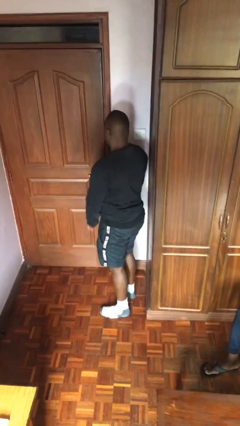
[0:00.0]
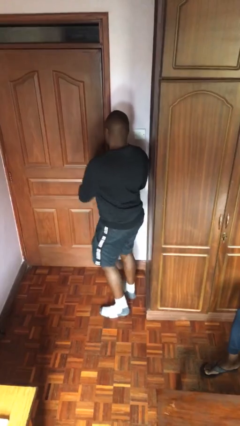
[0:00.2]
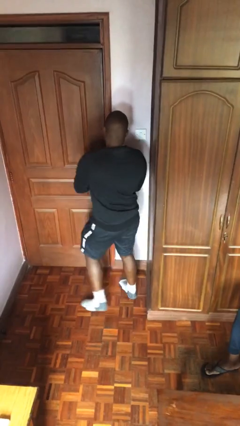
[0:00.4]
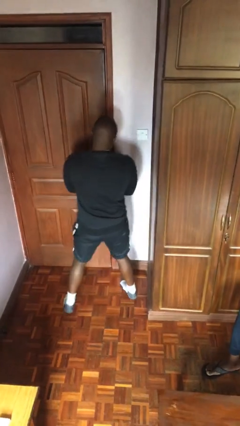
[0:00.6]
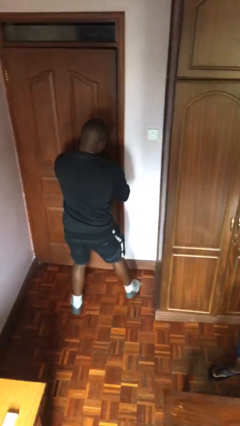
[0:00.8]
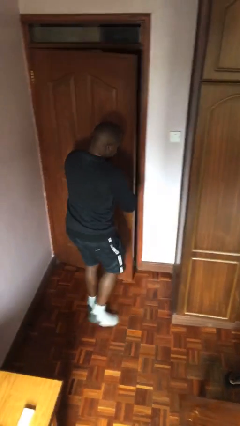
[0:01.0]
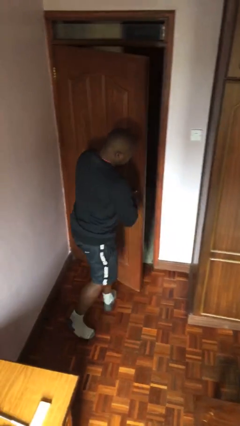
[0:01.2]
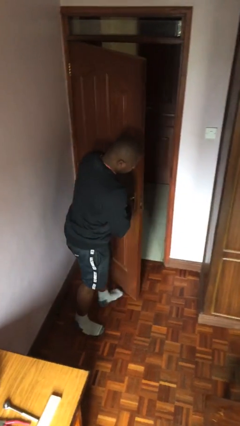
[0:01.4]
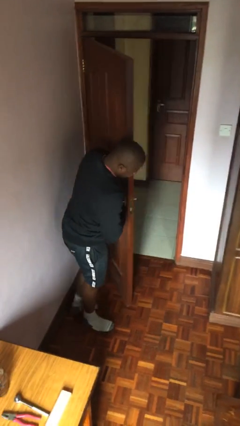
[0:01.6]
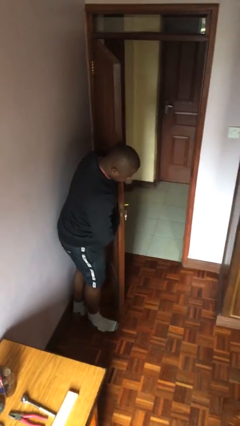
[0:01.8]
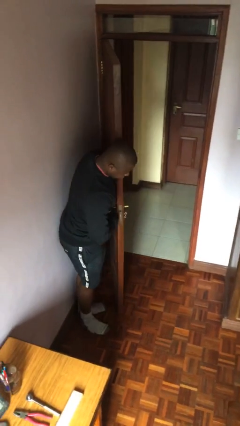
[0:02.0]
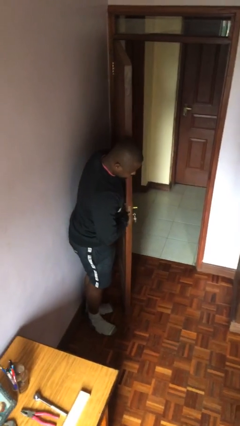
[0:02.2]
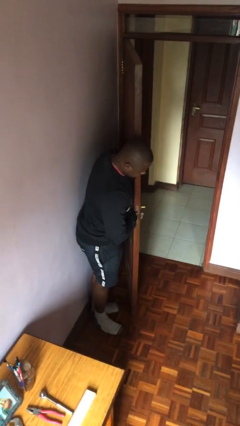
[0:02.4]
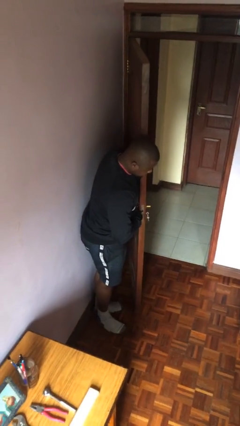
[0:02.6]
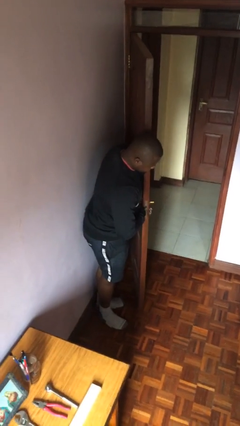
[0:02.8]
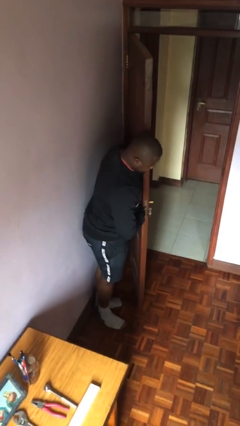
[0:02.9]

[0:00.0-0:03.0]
person opens facility door

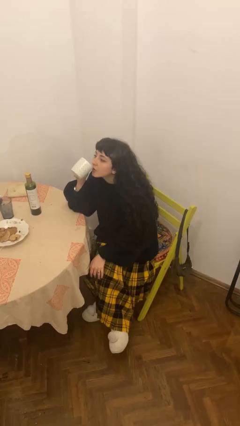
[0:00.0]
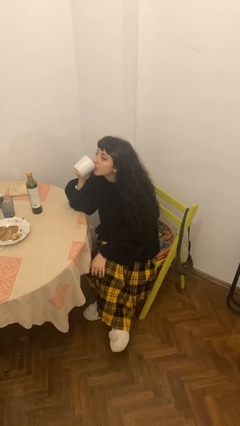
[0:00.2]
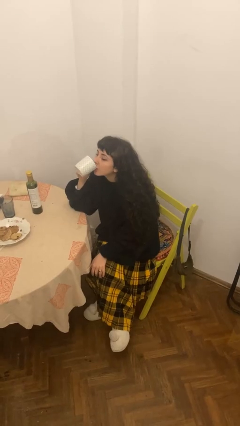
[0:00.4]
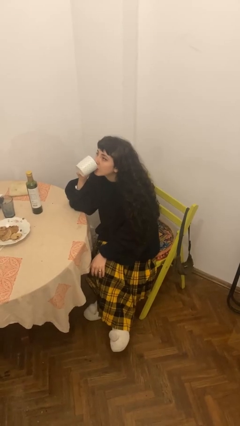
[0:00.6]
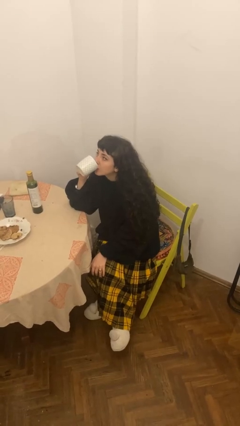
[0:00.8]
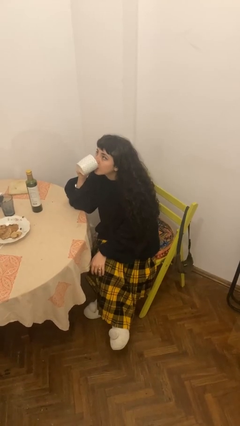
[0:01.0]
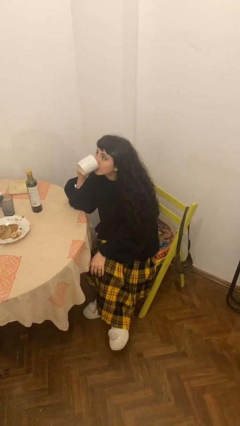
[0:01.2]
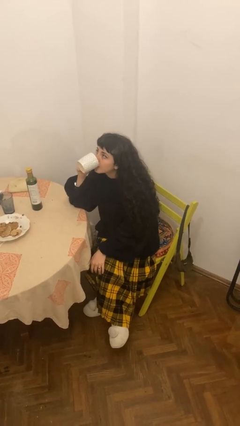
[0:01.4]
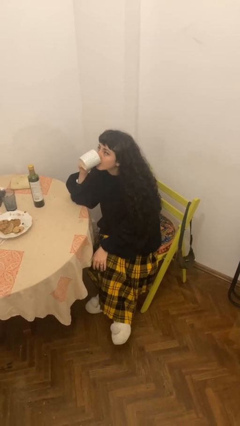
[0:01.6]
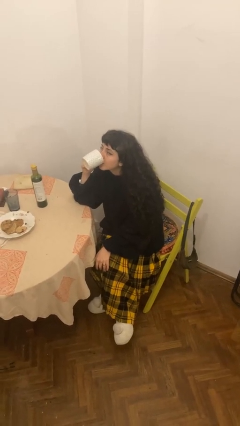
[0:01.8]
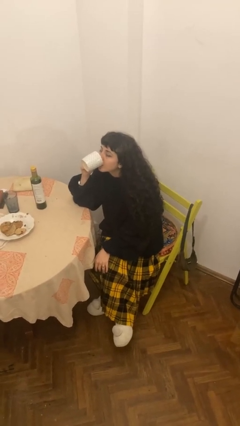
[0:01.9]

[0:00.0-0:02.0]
person drinks from mug

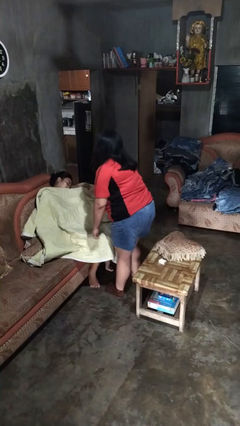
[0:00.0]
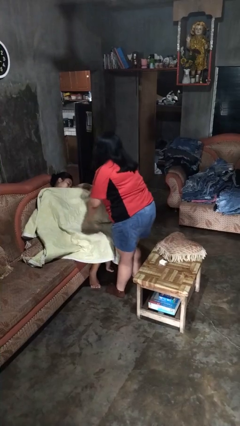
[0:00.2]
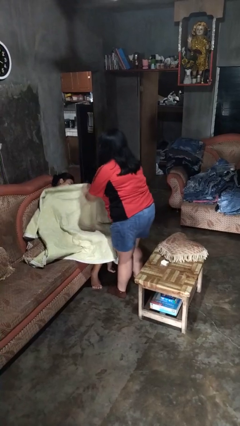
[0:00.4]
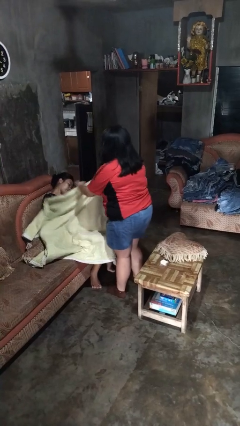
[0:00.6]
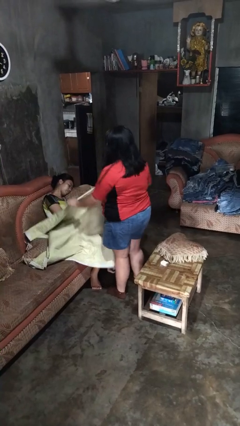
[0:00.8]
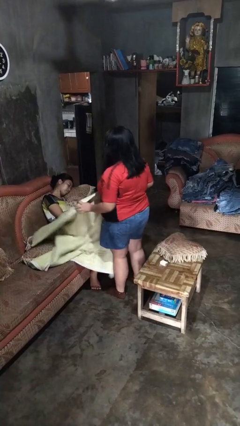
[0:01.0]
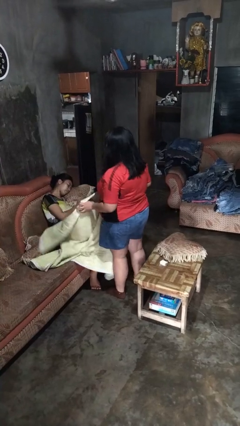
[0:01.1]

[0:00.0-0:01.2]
person uncovers friend with blanket

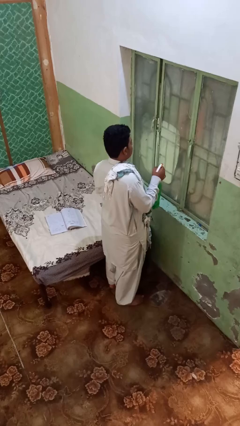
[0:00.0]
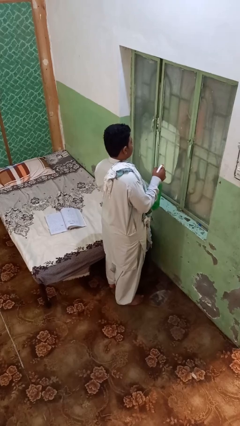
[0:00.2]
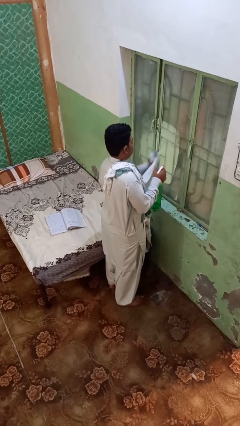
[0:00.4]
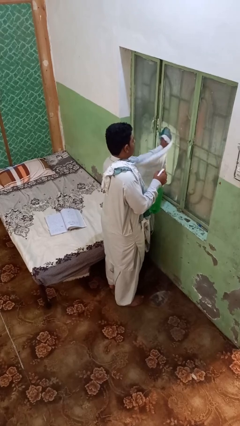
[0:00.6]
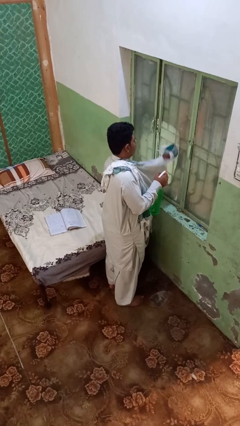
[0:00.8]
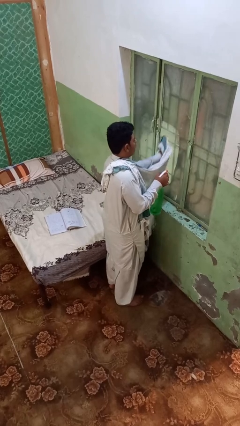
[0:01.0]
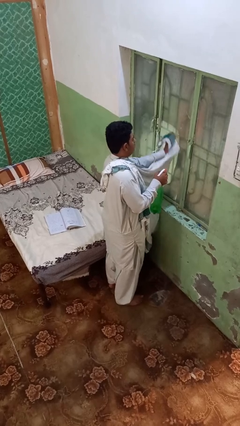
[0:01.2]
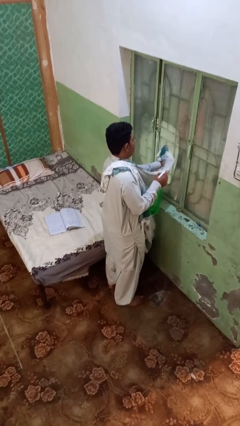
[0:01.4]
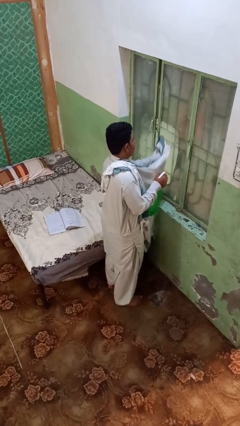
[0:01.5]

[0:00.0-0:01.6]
person washes window

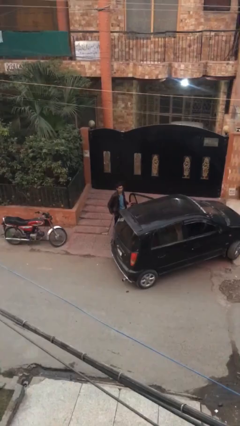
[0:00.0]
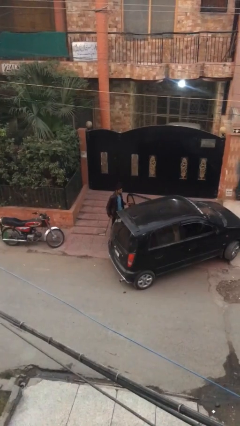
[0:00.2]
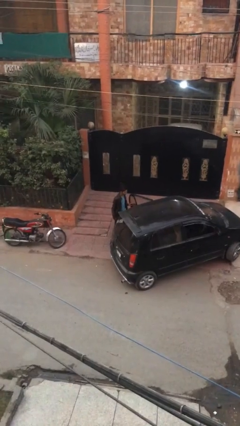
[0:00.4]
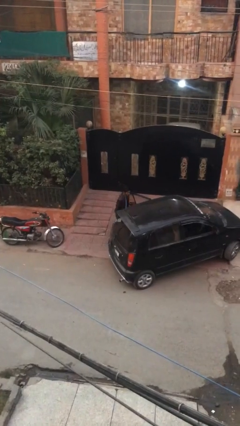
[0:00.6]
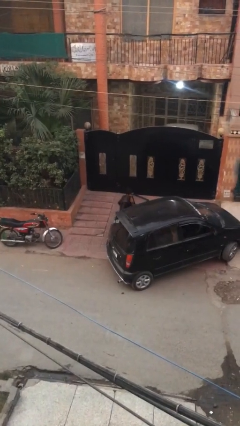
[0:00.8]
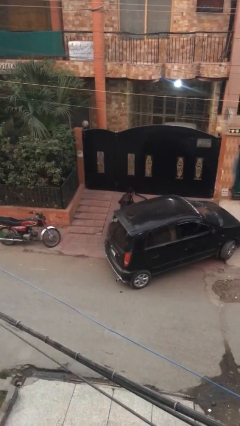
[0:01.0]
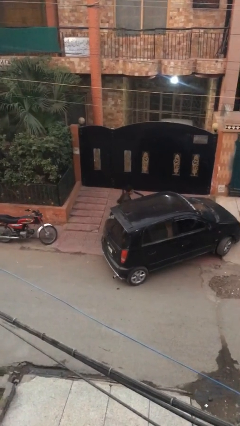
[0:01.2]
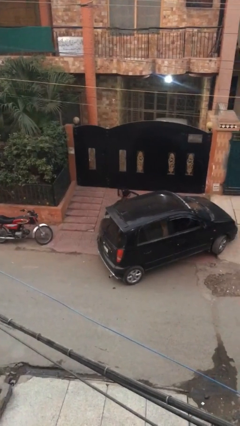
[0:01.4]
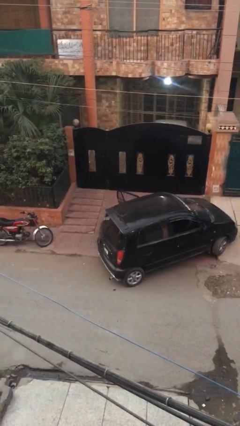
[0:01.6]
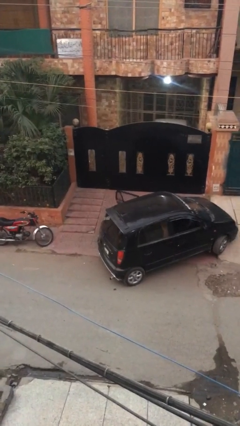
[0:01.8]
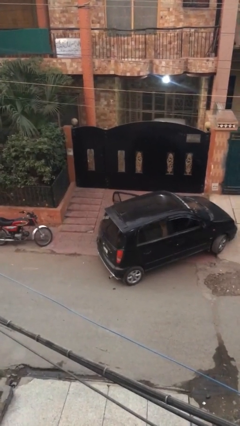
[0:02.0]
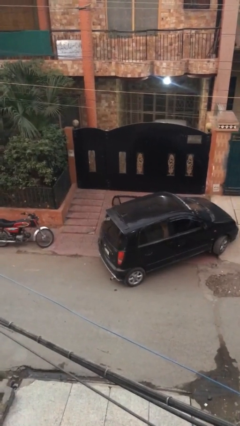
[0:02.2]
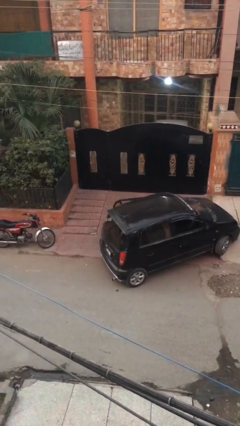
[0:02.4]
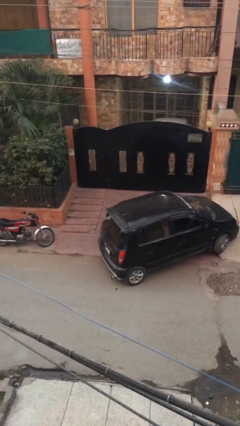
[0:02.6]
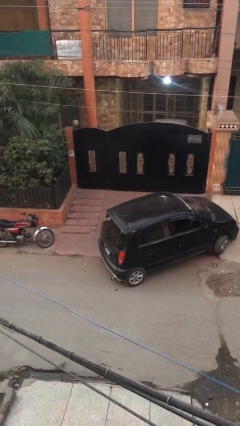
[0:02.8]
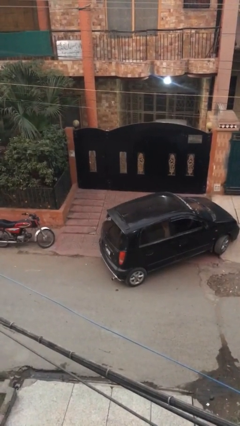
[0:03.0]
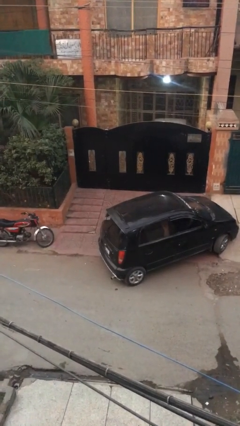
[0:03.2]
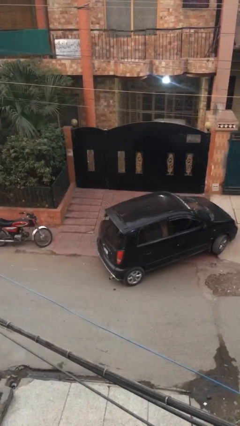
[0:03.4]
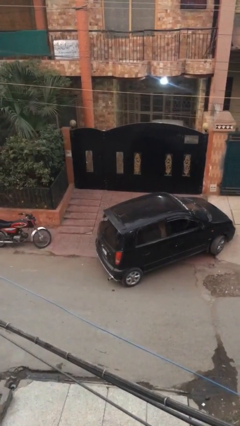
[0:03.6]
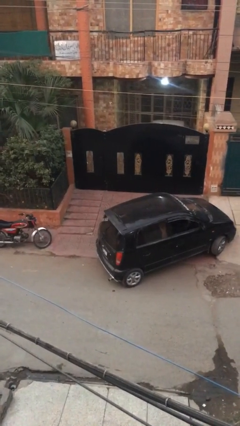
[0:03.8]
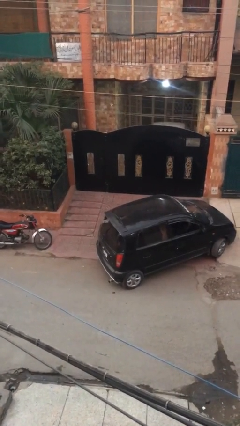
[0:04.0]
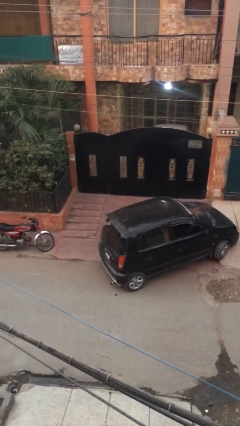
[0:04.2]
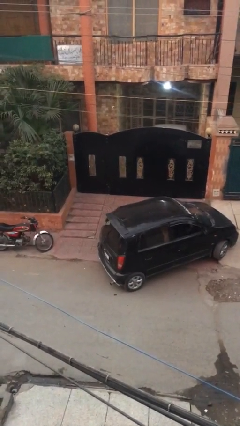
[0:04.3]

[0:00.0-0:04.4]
person enters car

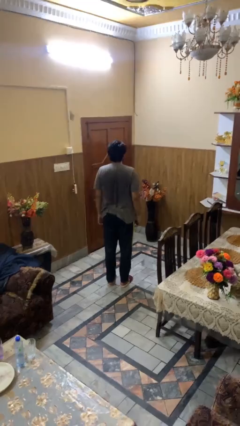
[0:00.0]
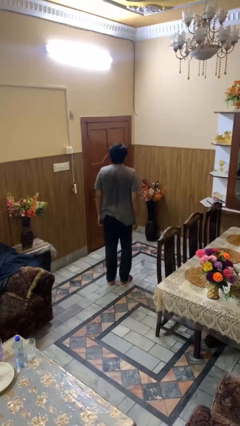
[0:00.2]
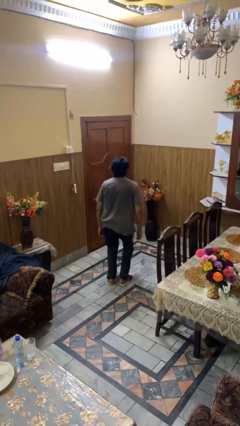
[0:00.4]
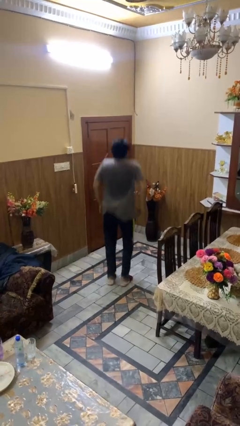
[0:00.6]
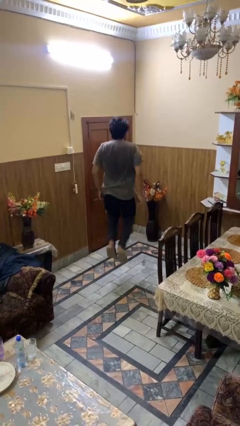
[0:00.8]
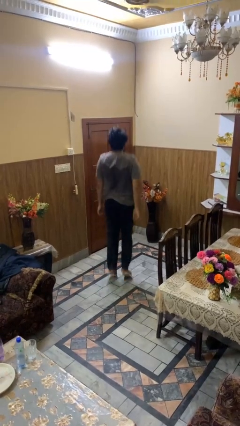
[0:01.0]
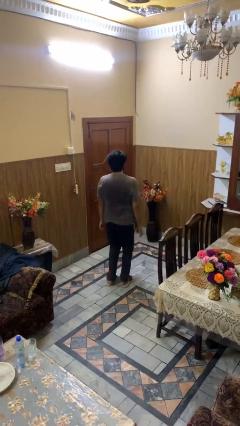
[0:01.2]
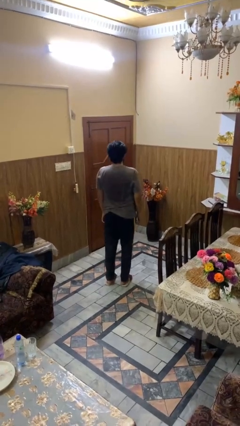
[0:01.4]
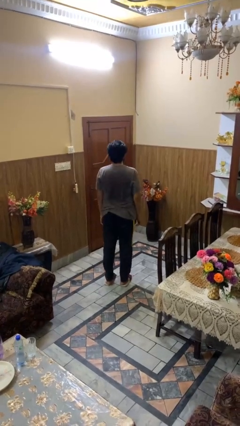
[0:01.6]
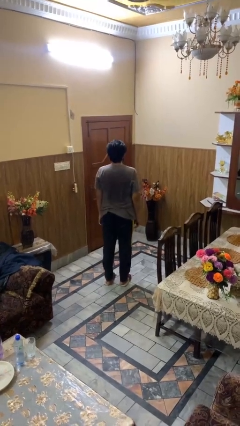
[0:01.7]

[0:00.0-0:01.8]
person jumps

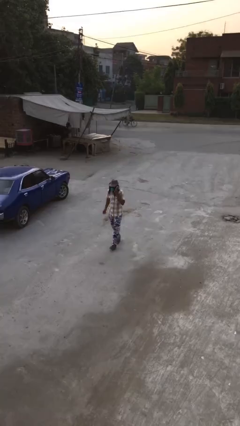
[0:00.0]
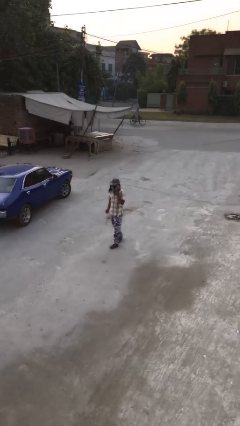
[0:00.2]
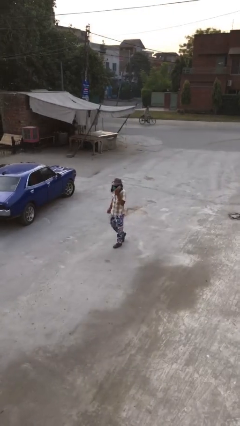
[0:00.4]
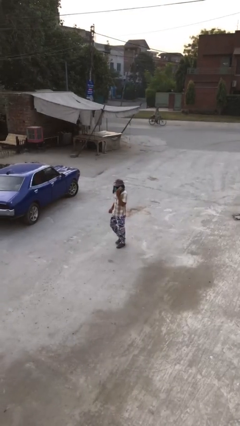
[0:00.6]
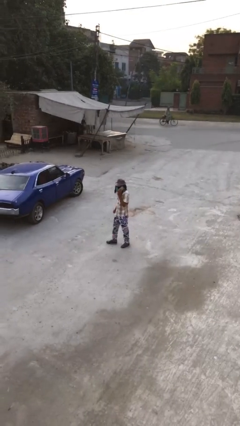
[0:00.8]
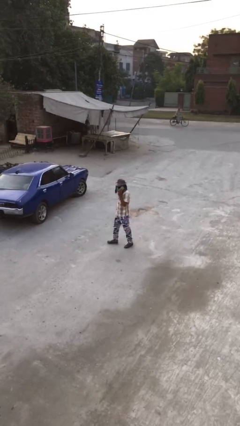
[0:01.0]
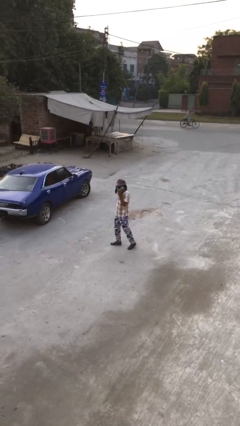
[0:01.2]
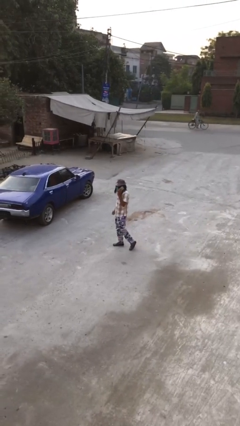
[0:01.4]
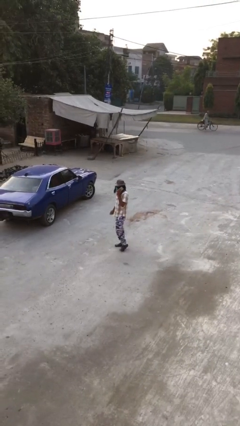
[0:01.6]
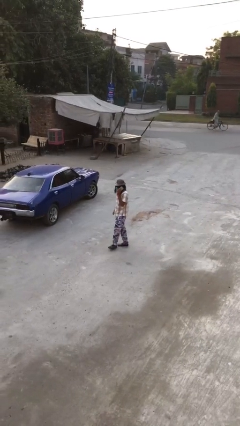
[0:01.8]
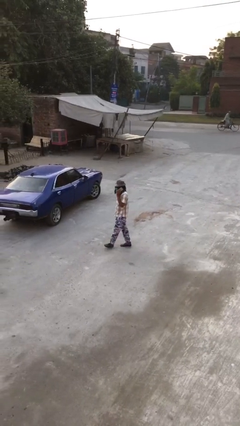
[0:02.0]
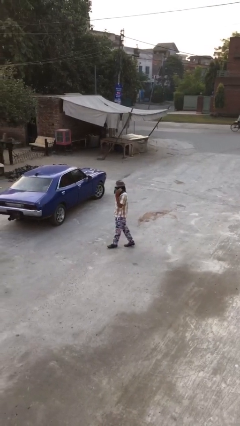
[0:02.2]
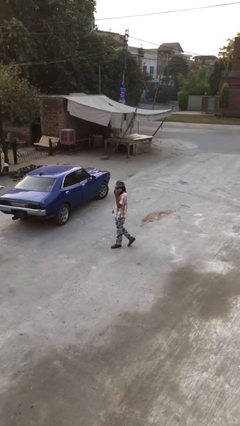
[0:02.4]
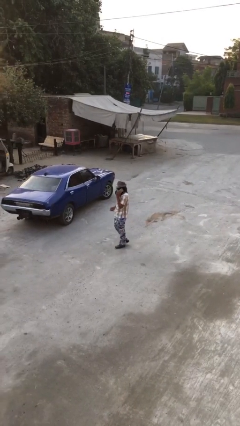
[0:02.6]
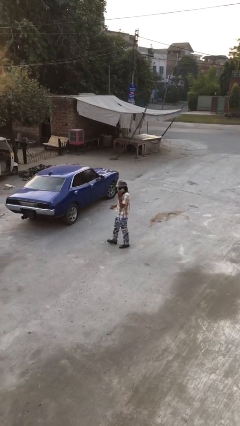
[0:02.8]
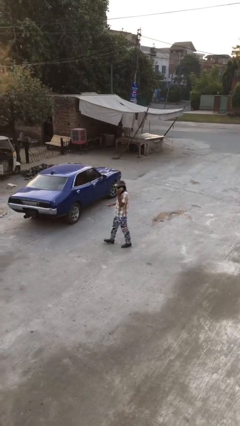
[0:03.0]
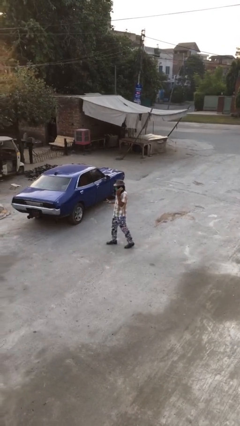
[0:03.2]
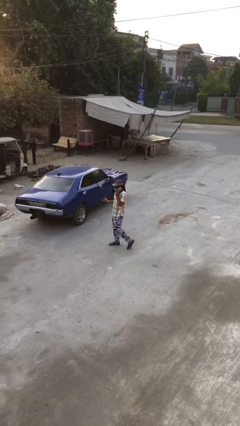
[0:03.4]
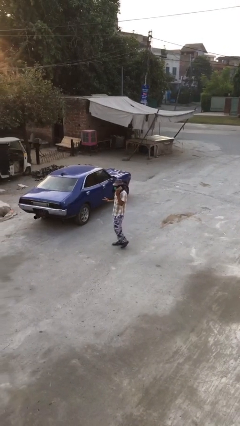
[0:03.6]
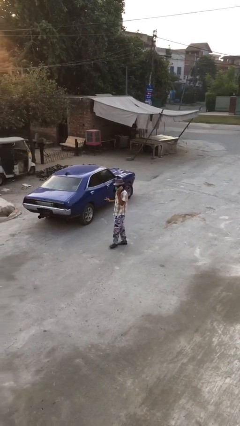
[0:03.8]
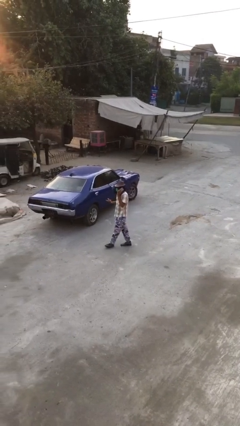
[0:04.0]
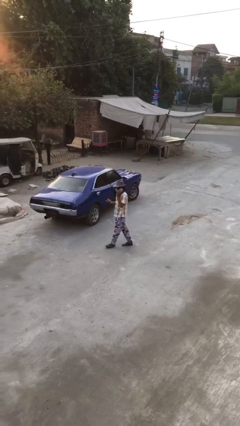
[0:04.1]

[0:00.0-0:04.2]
person talks on phone
